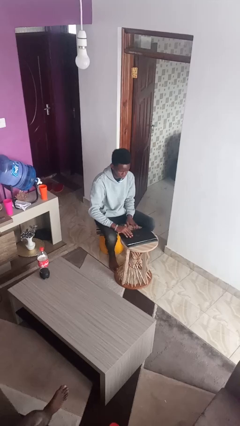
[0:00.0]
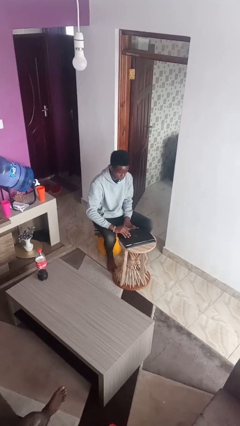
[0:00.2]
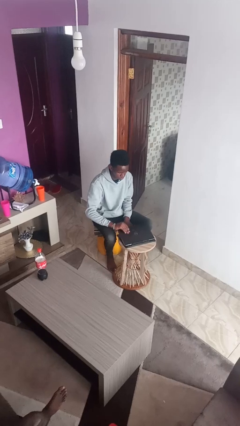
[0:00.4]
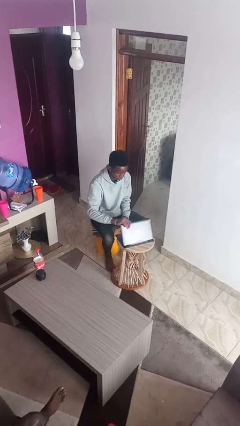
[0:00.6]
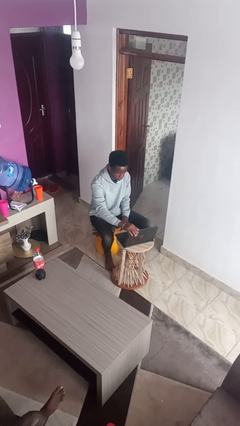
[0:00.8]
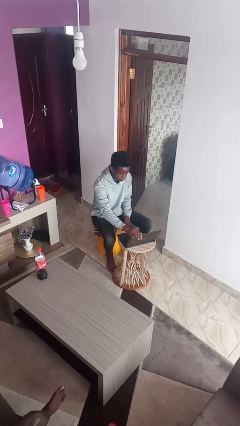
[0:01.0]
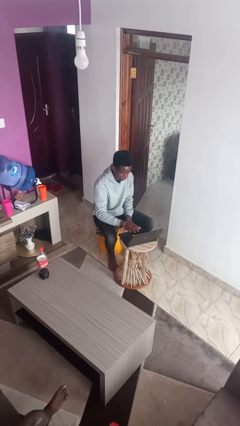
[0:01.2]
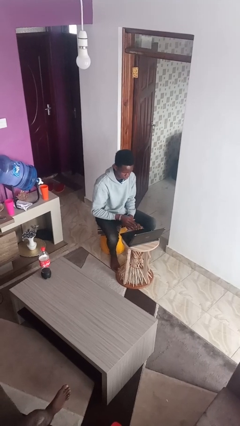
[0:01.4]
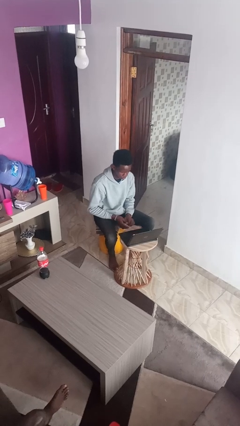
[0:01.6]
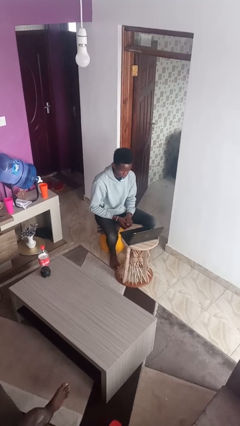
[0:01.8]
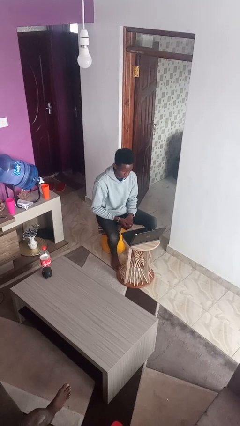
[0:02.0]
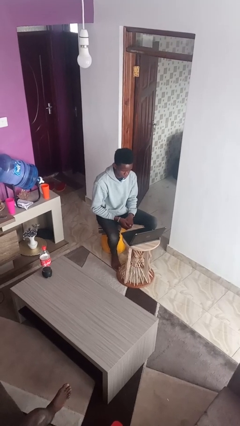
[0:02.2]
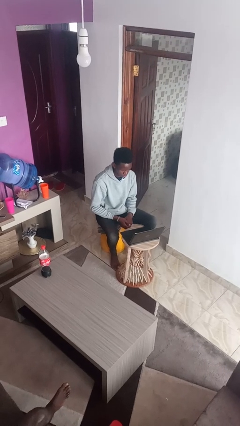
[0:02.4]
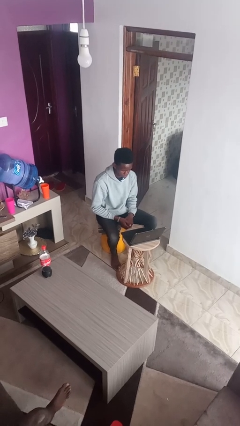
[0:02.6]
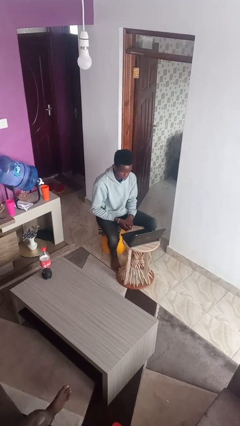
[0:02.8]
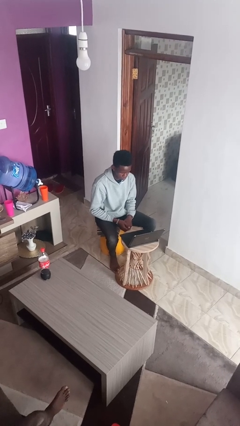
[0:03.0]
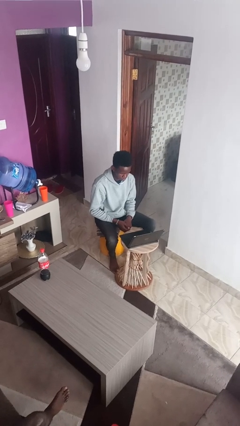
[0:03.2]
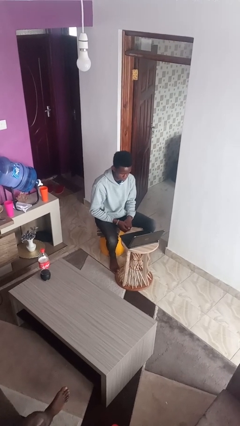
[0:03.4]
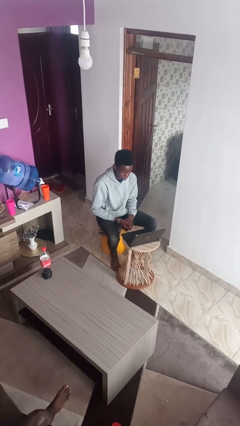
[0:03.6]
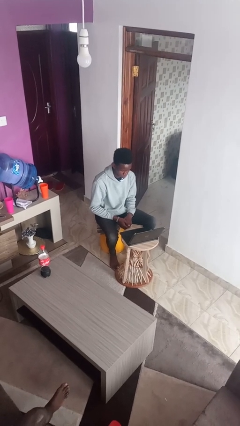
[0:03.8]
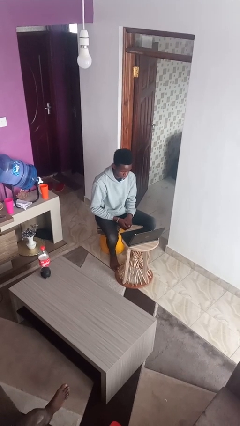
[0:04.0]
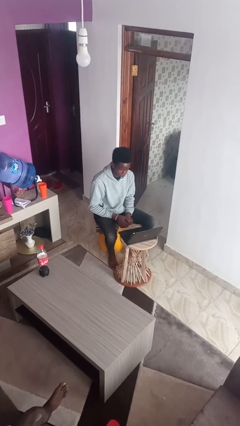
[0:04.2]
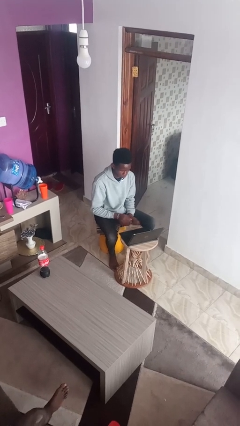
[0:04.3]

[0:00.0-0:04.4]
person opens laptop

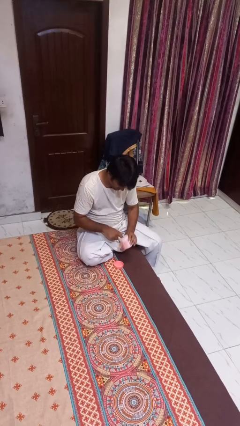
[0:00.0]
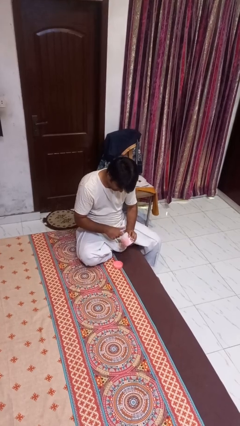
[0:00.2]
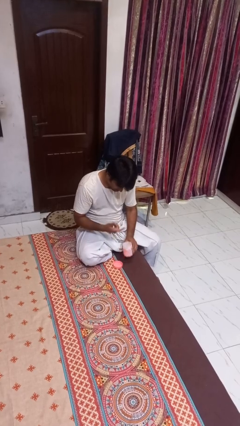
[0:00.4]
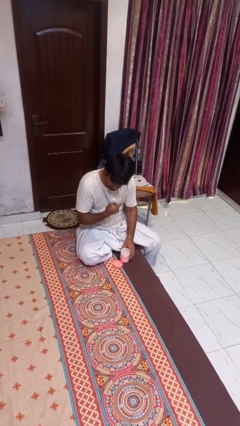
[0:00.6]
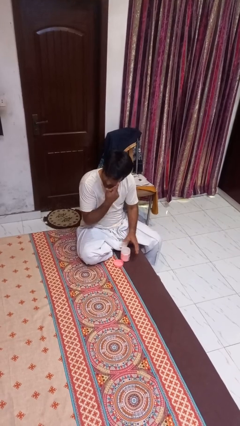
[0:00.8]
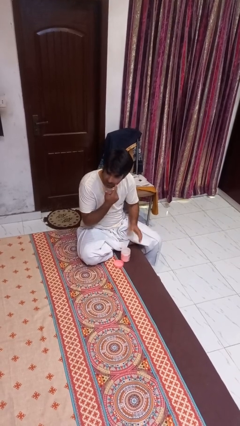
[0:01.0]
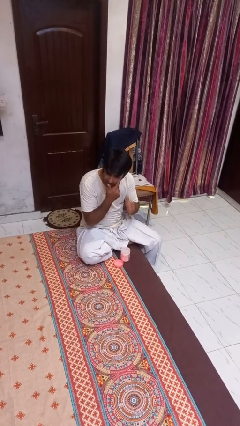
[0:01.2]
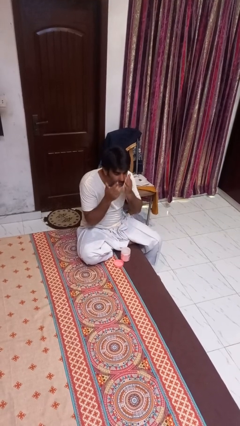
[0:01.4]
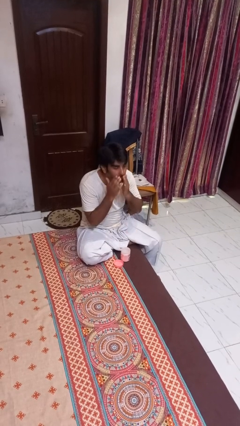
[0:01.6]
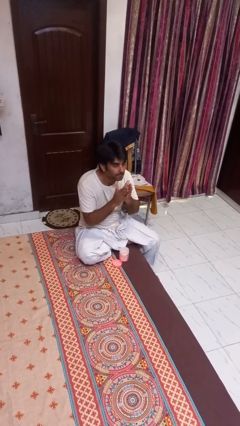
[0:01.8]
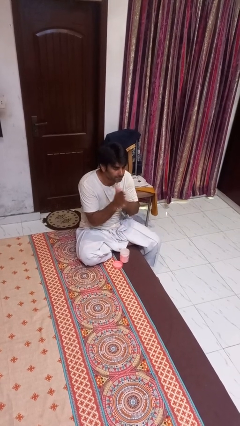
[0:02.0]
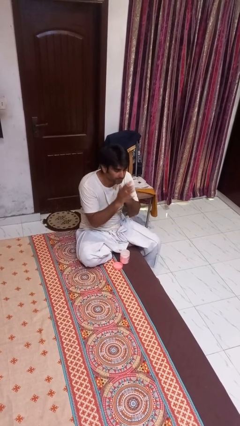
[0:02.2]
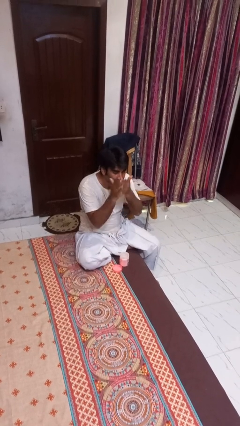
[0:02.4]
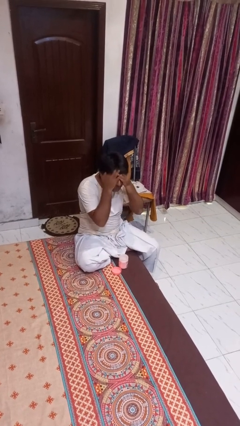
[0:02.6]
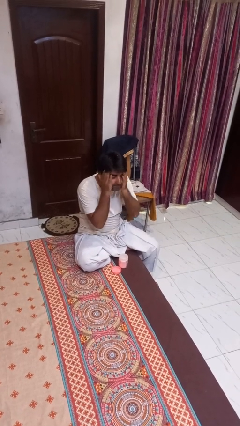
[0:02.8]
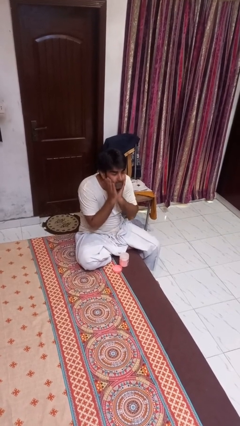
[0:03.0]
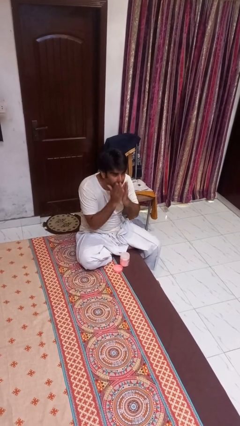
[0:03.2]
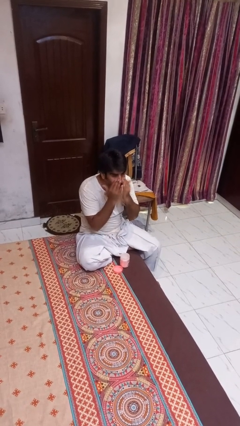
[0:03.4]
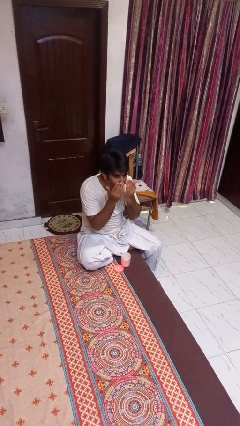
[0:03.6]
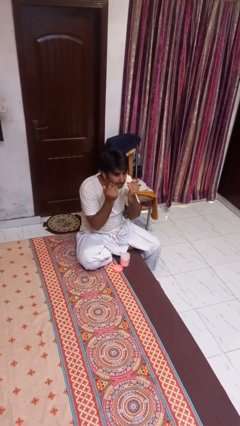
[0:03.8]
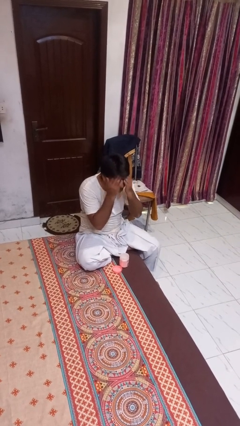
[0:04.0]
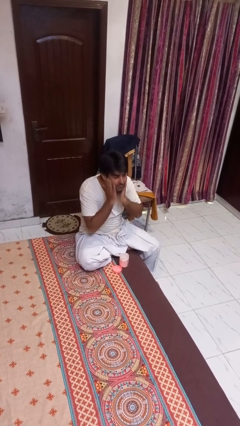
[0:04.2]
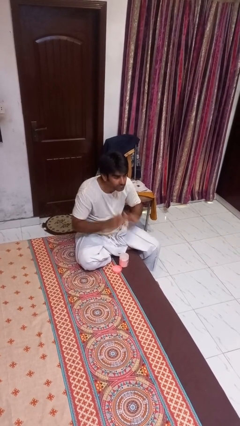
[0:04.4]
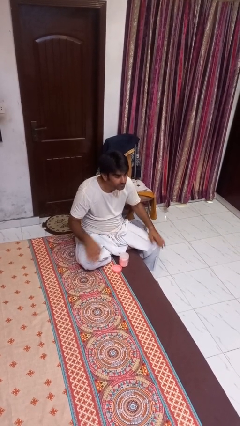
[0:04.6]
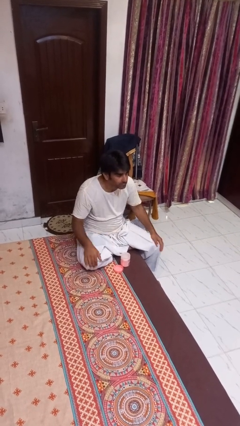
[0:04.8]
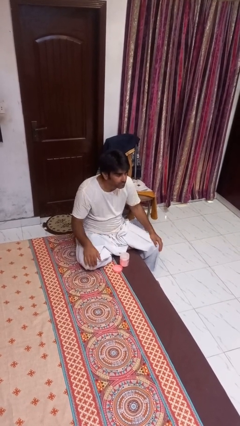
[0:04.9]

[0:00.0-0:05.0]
person applies facial moisturizer

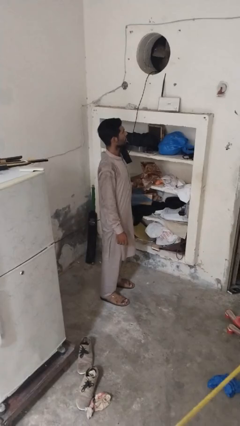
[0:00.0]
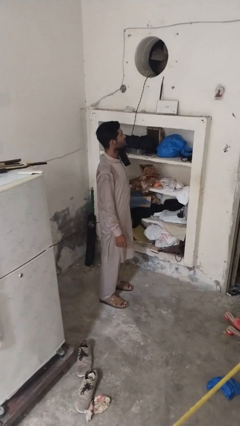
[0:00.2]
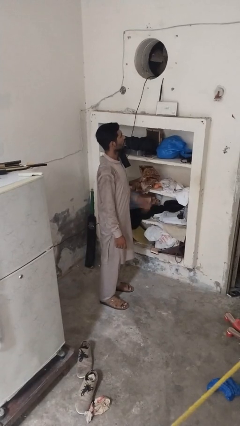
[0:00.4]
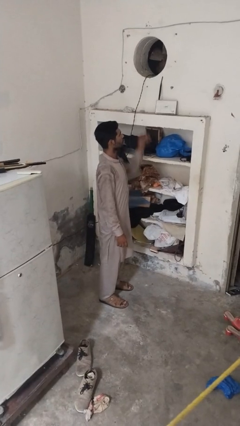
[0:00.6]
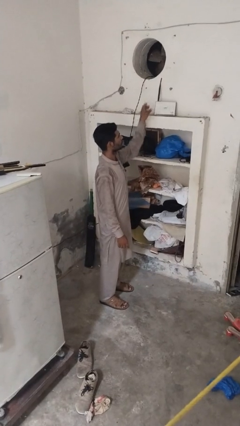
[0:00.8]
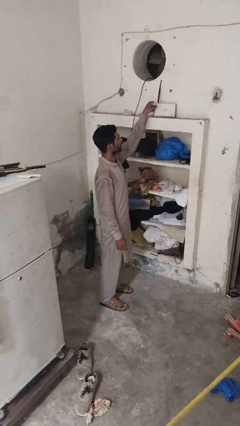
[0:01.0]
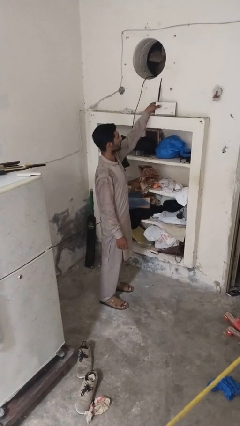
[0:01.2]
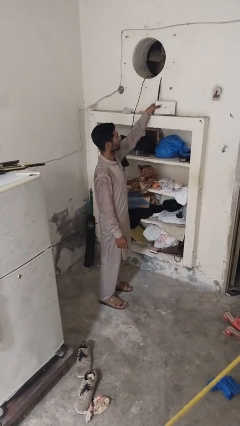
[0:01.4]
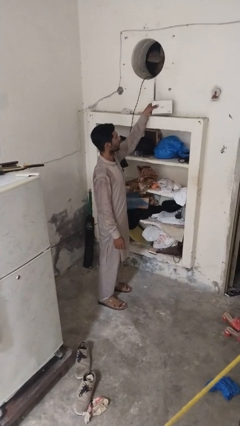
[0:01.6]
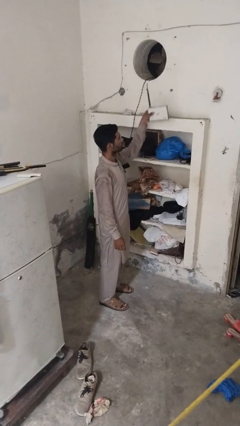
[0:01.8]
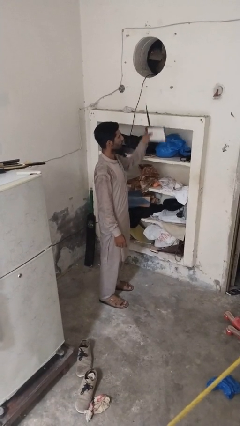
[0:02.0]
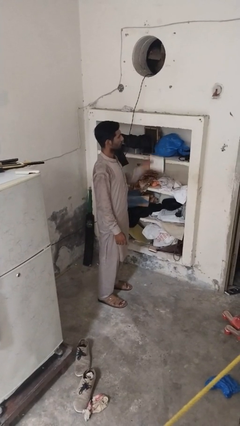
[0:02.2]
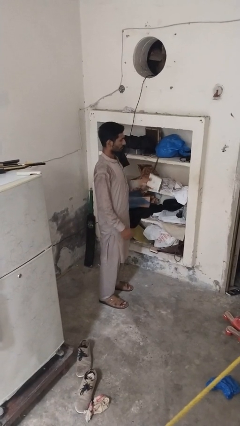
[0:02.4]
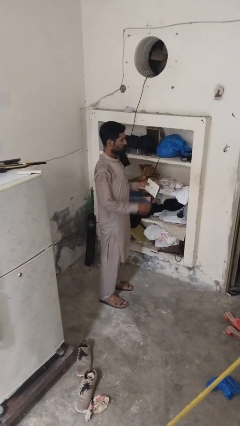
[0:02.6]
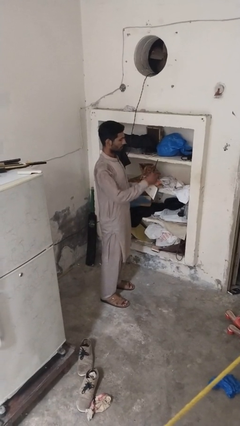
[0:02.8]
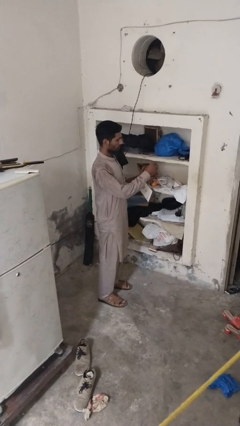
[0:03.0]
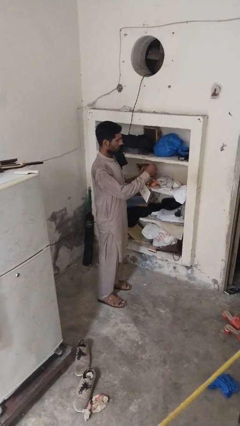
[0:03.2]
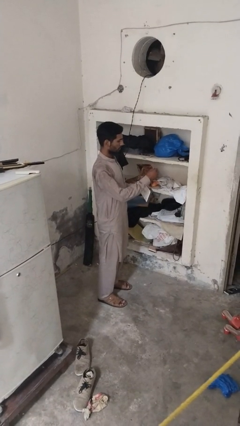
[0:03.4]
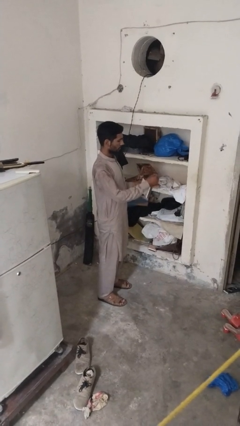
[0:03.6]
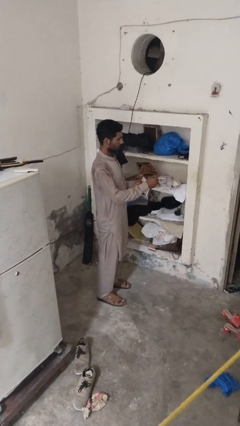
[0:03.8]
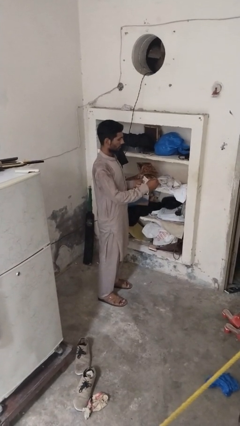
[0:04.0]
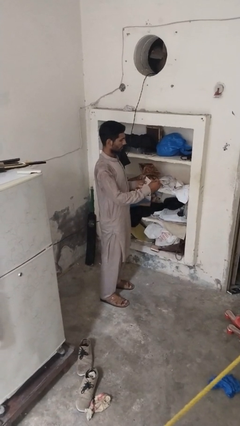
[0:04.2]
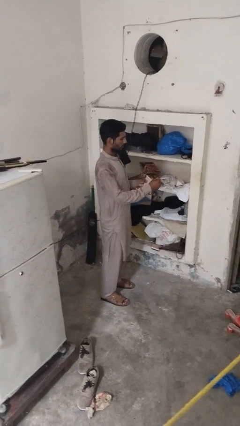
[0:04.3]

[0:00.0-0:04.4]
person picks up object from shelf

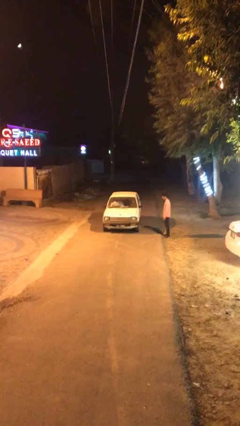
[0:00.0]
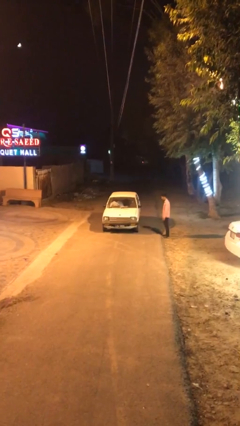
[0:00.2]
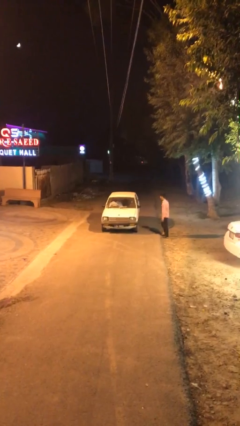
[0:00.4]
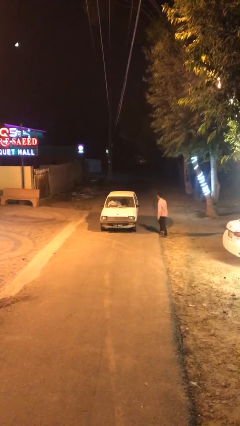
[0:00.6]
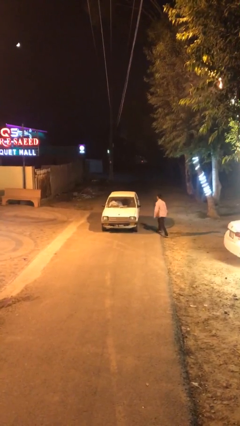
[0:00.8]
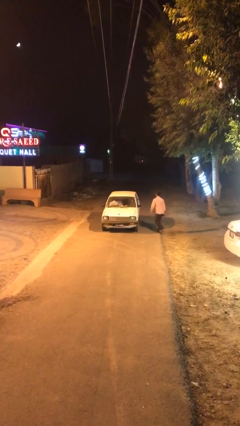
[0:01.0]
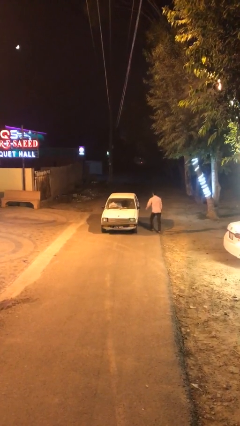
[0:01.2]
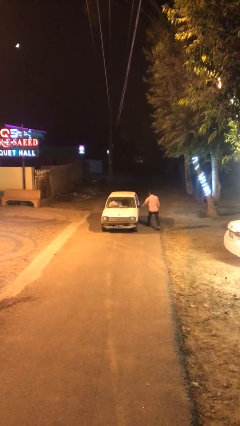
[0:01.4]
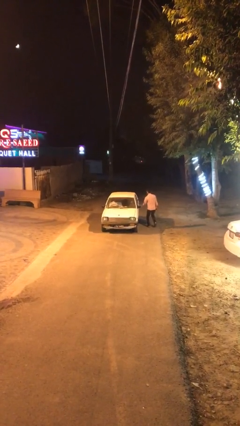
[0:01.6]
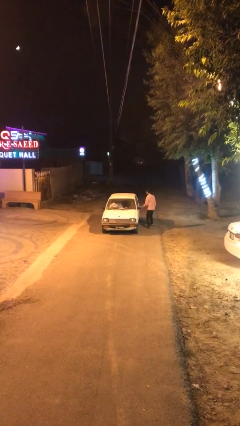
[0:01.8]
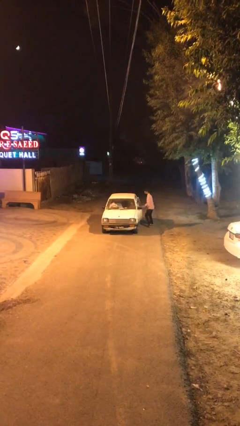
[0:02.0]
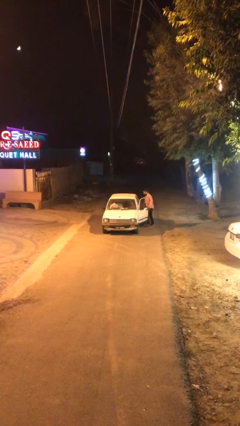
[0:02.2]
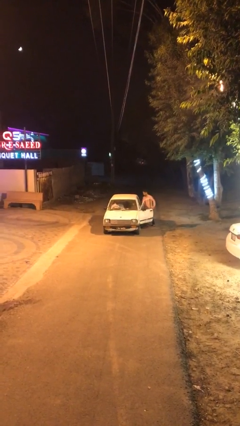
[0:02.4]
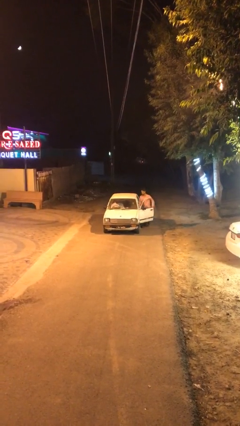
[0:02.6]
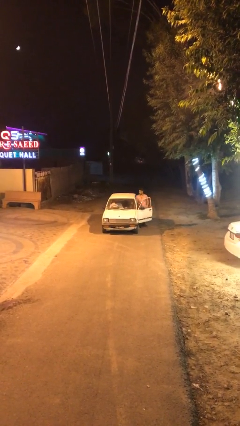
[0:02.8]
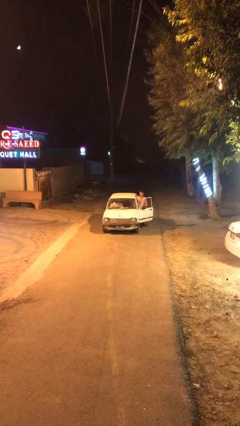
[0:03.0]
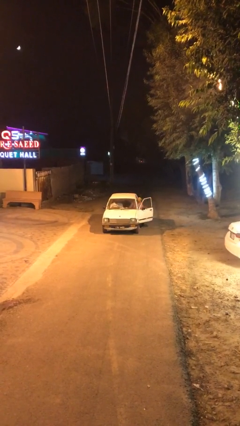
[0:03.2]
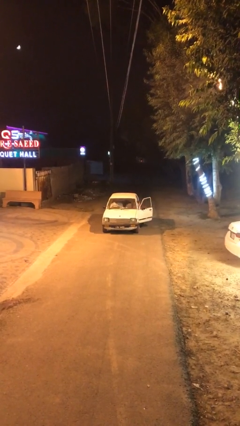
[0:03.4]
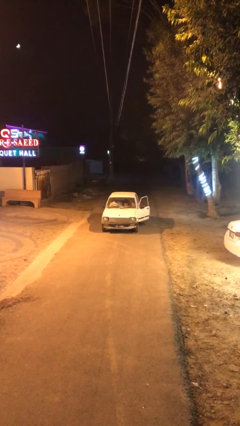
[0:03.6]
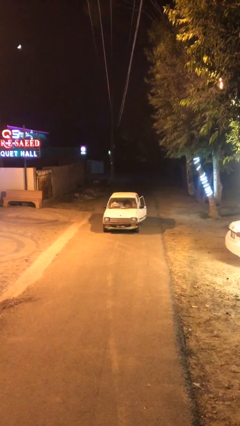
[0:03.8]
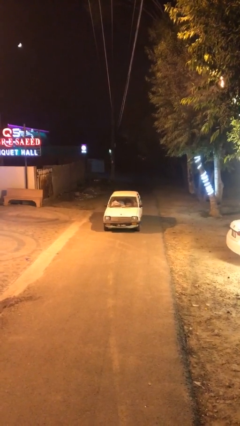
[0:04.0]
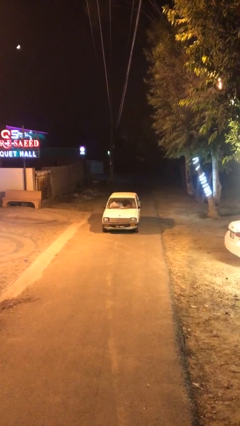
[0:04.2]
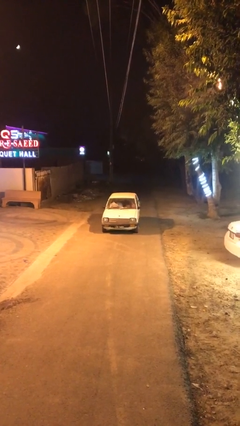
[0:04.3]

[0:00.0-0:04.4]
car picks up person
